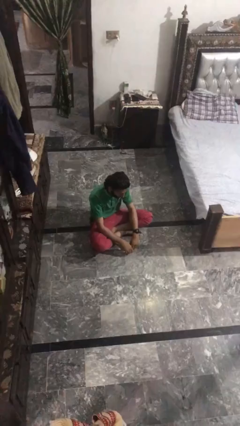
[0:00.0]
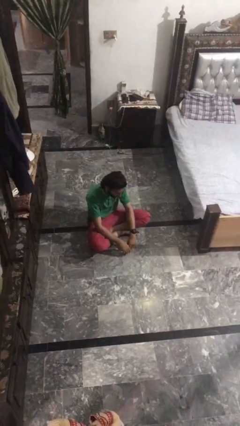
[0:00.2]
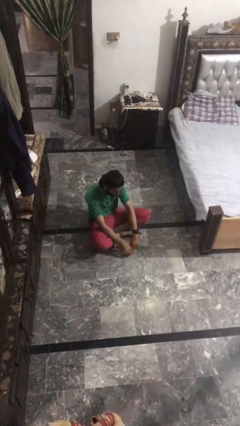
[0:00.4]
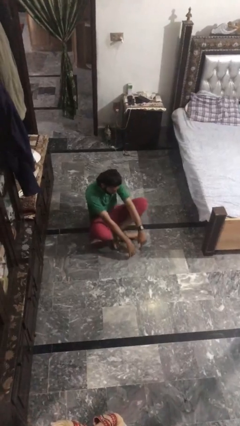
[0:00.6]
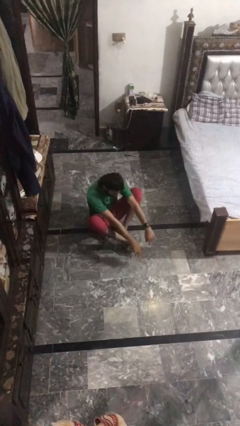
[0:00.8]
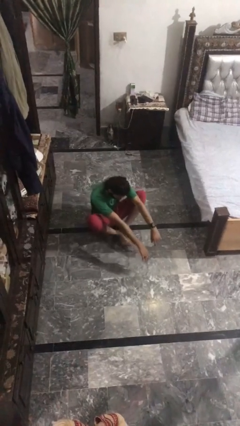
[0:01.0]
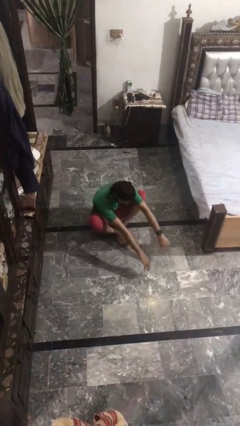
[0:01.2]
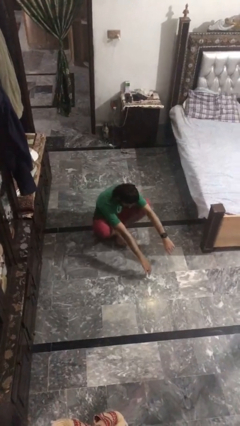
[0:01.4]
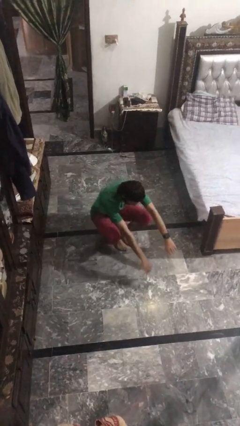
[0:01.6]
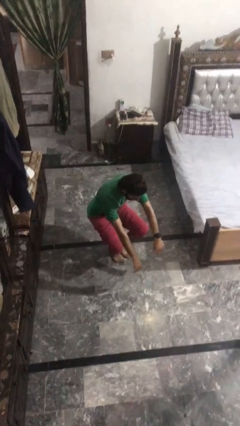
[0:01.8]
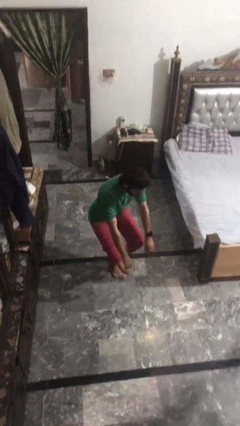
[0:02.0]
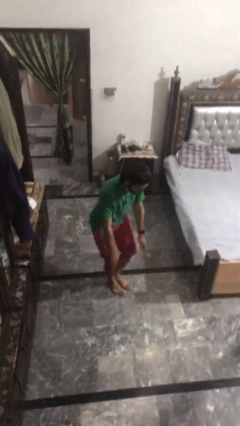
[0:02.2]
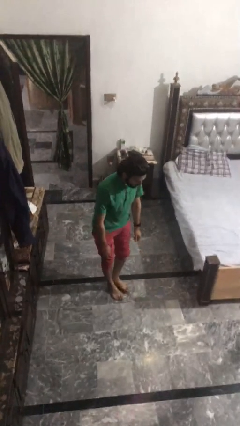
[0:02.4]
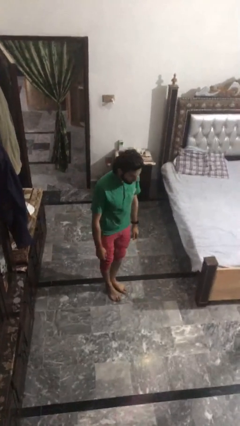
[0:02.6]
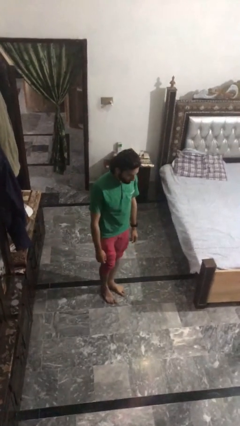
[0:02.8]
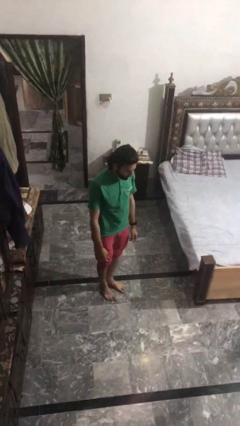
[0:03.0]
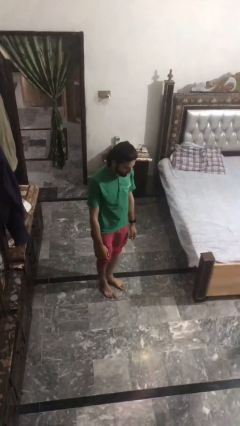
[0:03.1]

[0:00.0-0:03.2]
person stands up from floor

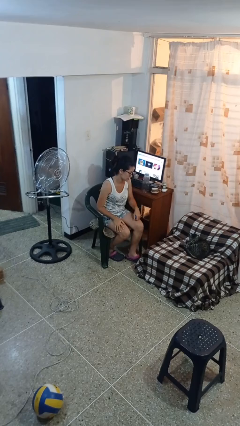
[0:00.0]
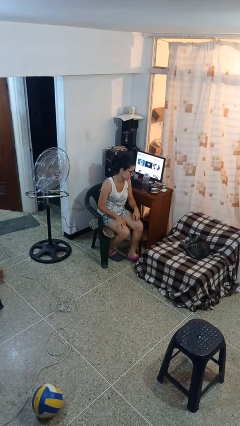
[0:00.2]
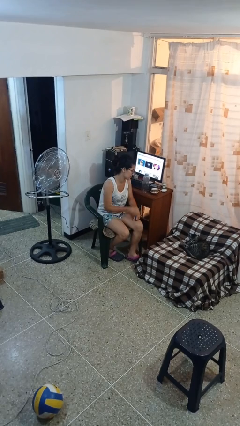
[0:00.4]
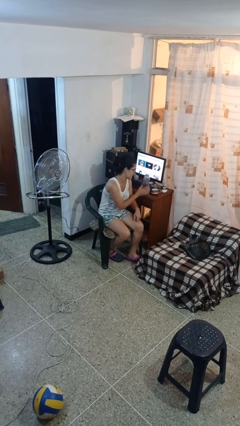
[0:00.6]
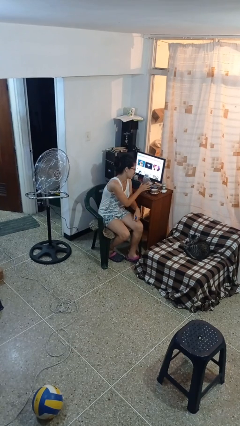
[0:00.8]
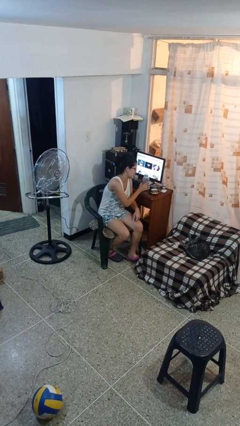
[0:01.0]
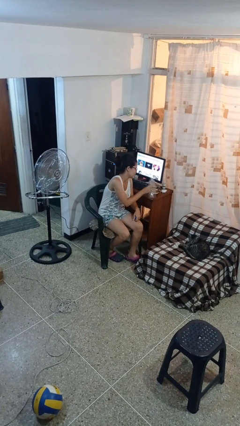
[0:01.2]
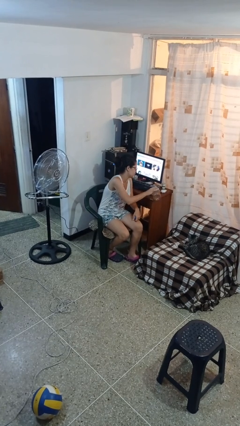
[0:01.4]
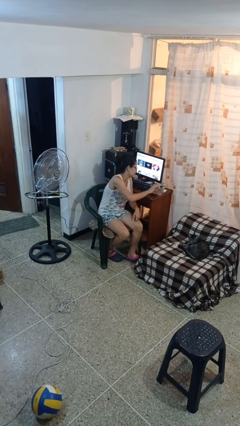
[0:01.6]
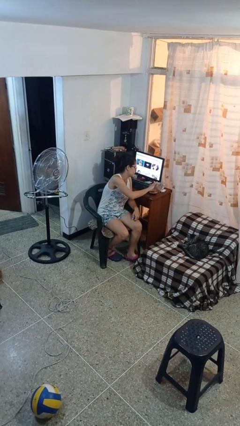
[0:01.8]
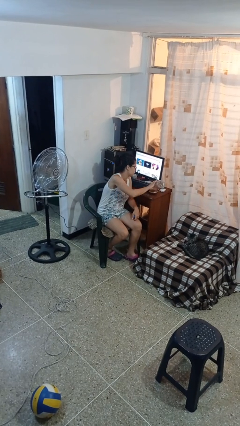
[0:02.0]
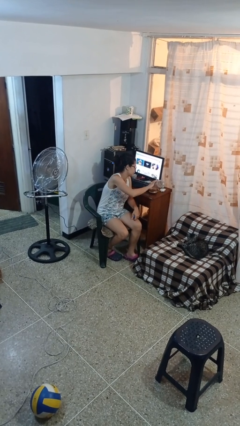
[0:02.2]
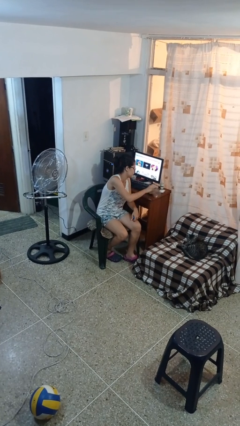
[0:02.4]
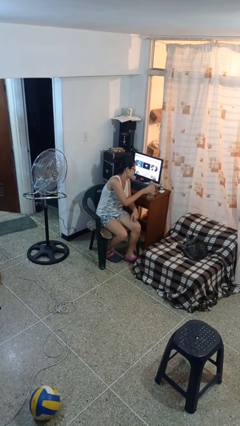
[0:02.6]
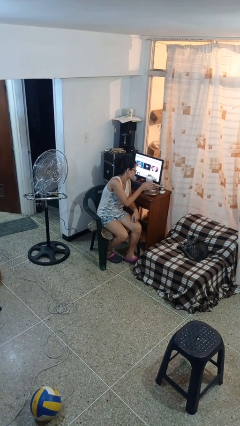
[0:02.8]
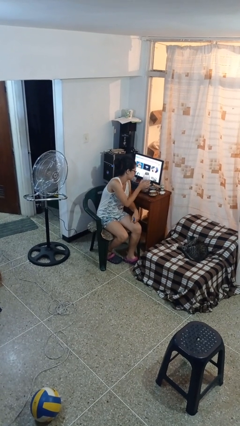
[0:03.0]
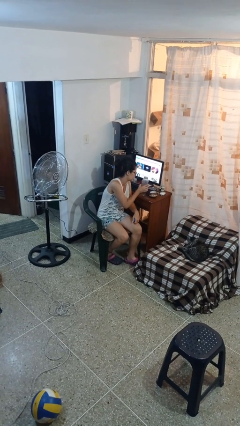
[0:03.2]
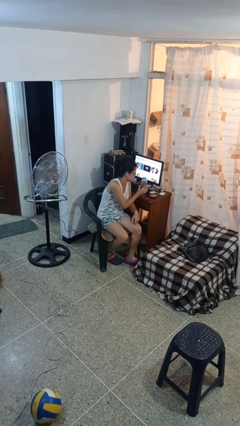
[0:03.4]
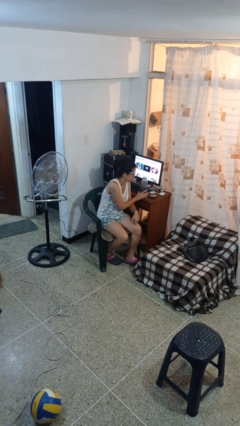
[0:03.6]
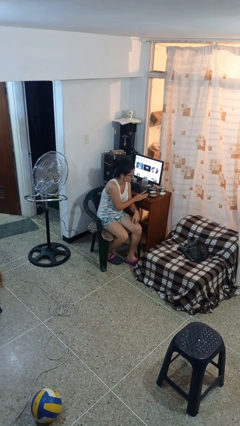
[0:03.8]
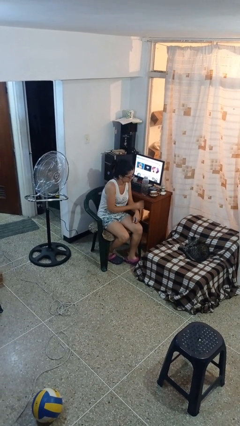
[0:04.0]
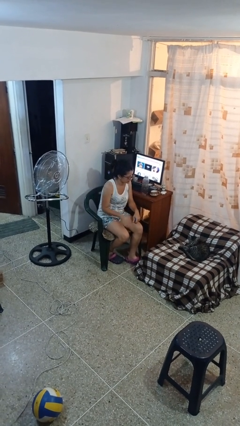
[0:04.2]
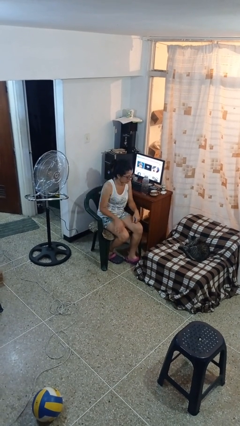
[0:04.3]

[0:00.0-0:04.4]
person pours liquid into cup

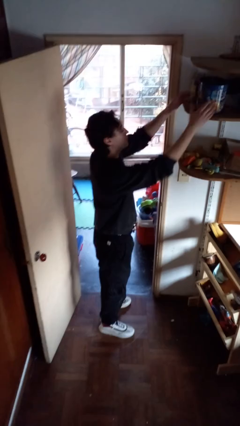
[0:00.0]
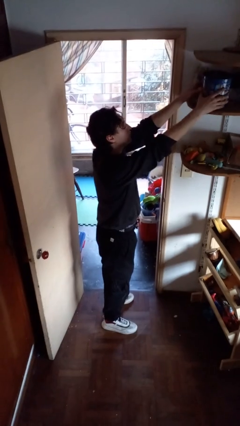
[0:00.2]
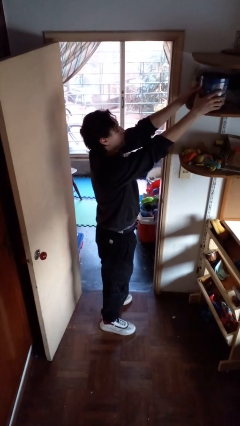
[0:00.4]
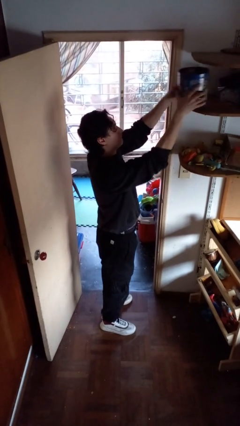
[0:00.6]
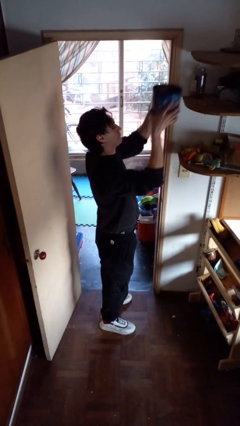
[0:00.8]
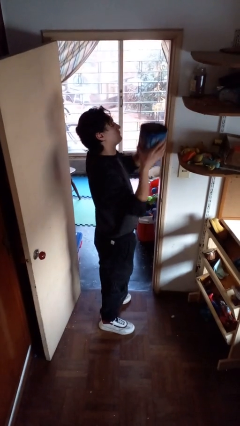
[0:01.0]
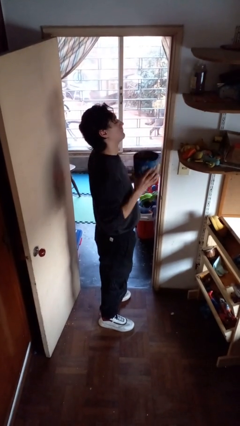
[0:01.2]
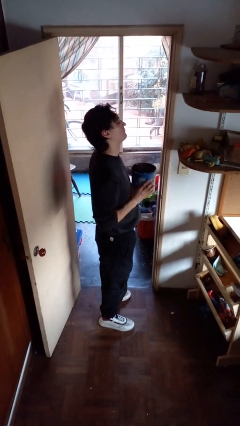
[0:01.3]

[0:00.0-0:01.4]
person picks up object from shelf

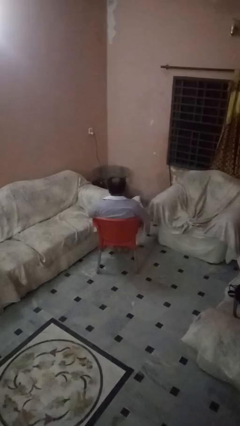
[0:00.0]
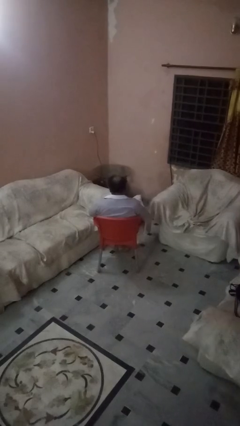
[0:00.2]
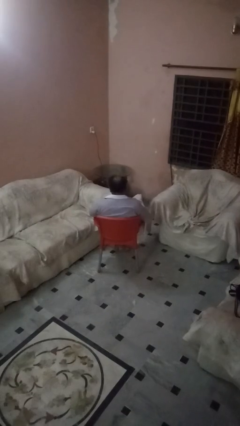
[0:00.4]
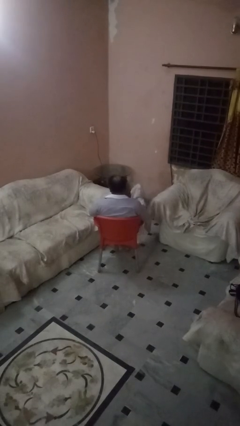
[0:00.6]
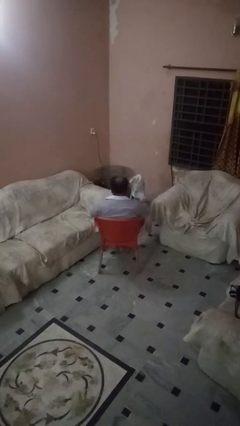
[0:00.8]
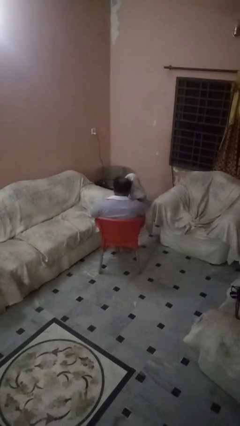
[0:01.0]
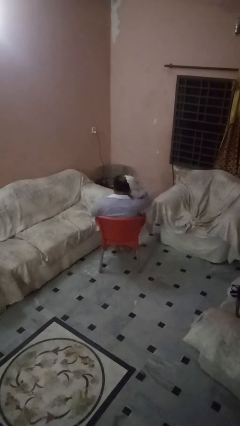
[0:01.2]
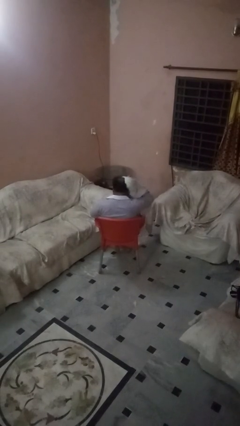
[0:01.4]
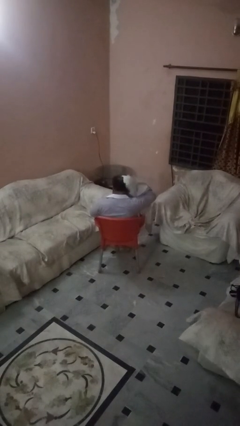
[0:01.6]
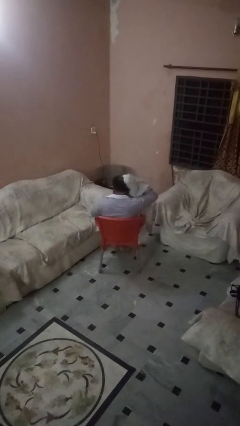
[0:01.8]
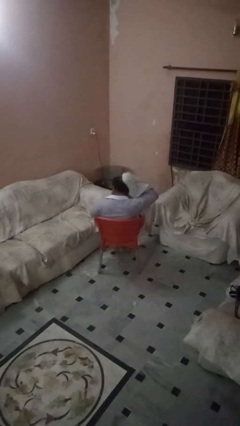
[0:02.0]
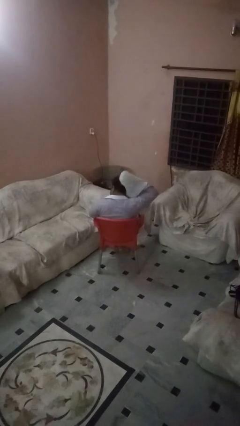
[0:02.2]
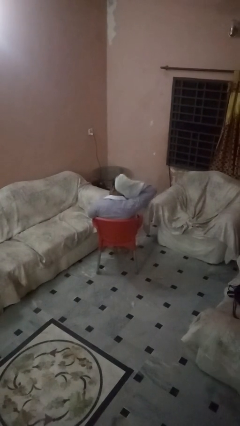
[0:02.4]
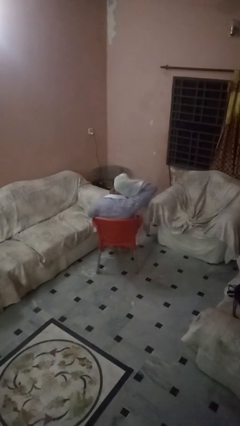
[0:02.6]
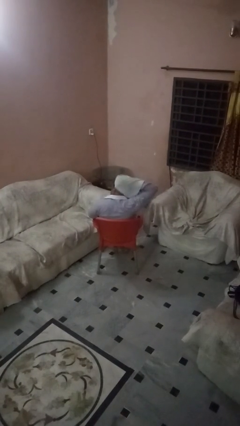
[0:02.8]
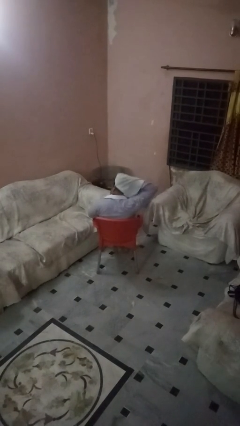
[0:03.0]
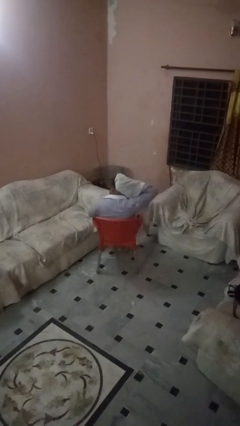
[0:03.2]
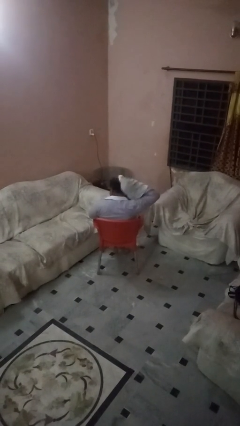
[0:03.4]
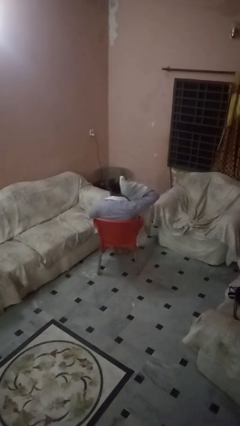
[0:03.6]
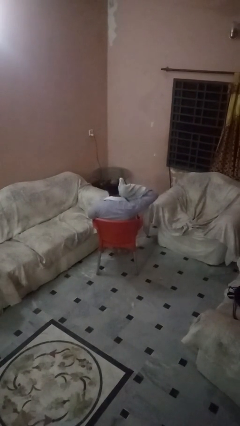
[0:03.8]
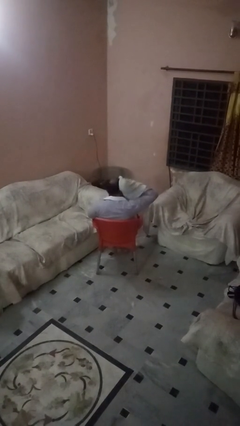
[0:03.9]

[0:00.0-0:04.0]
person dries hair with towel

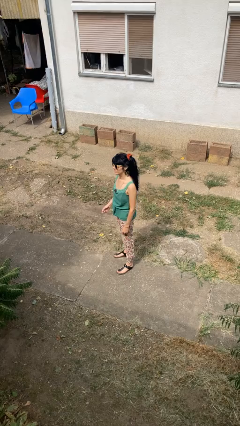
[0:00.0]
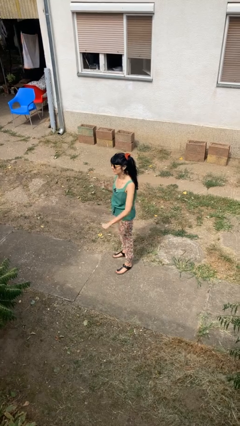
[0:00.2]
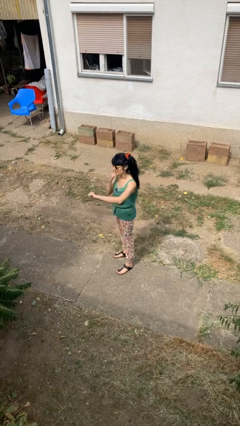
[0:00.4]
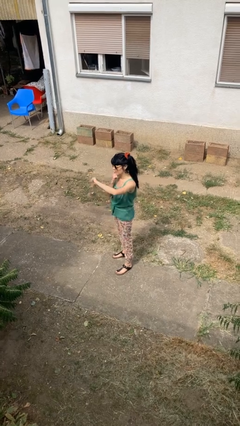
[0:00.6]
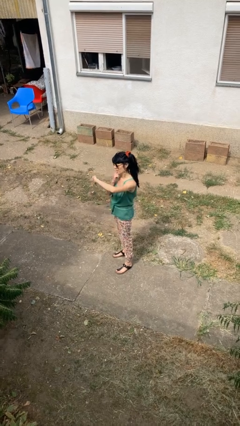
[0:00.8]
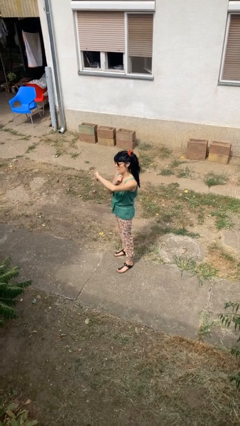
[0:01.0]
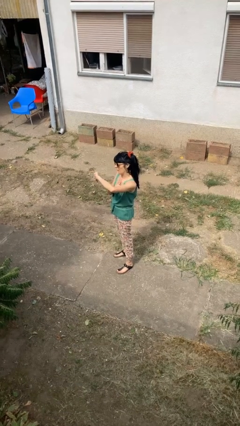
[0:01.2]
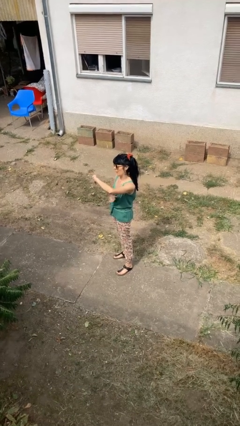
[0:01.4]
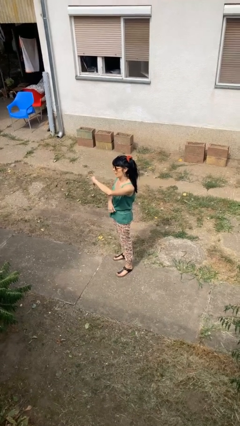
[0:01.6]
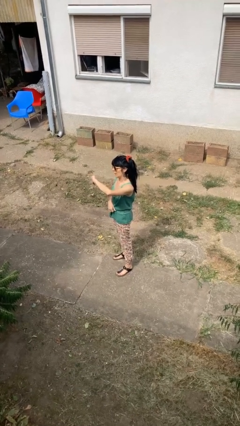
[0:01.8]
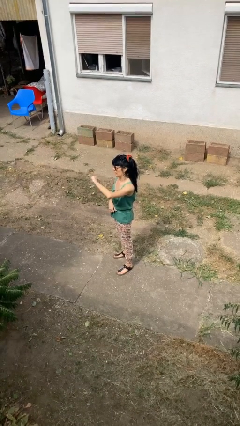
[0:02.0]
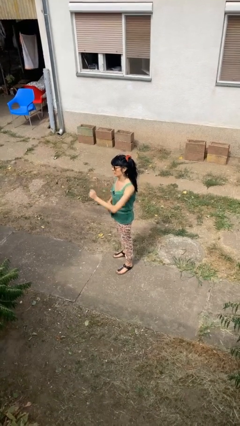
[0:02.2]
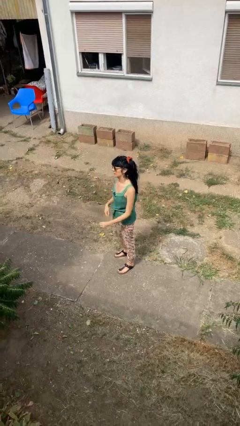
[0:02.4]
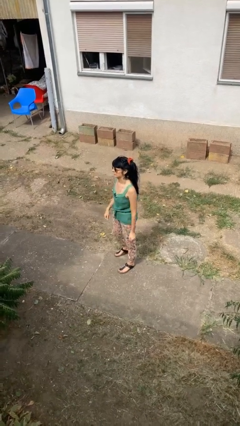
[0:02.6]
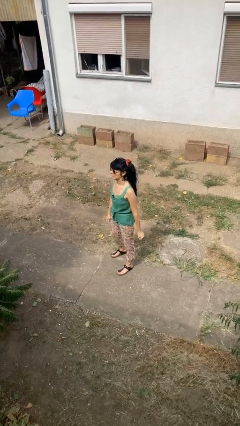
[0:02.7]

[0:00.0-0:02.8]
person gestures thumbs down

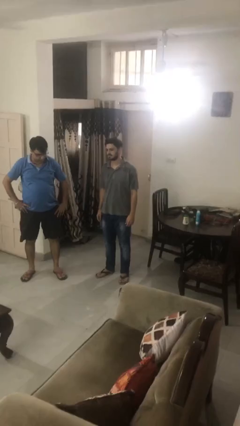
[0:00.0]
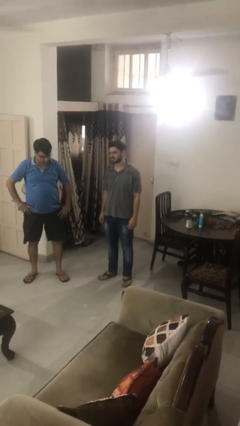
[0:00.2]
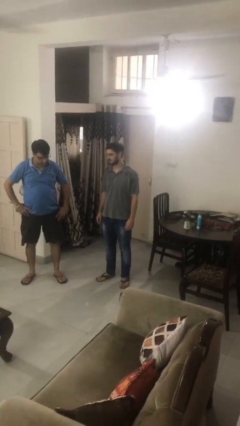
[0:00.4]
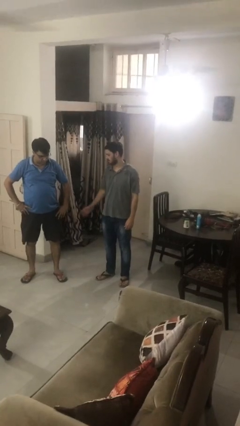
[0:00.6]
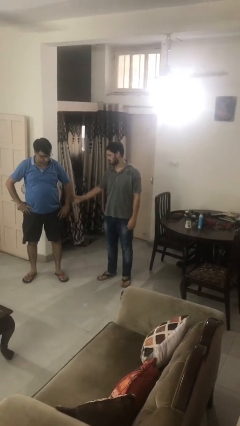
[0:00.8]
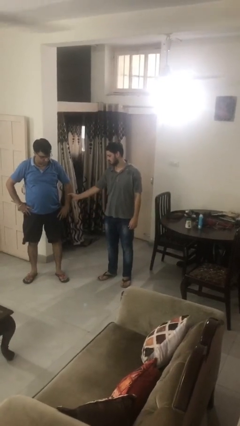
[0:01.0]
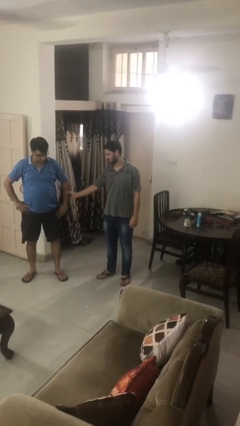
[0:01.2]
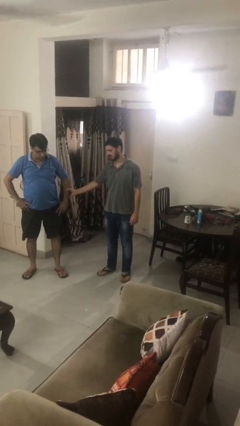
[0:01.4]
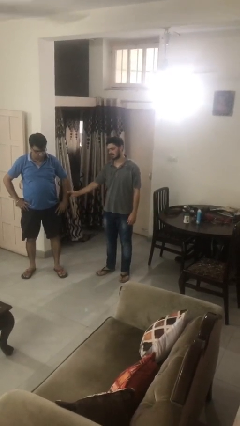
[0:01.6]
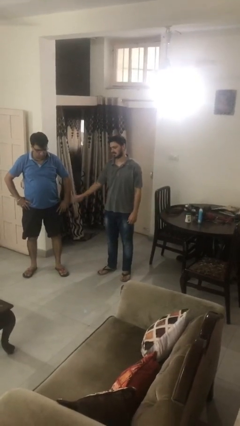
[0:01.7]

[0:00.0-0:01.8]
person grabs person by forearm
